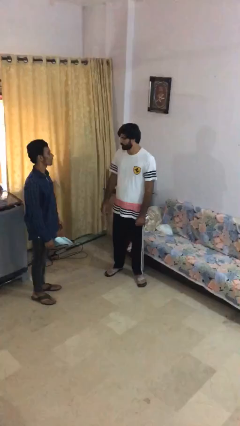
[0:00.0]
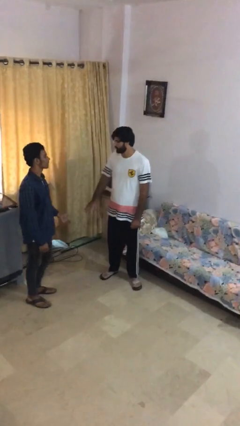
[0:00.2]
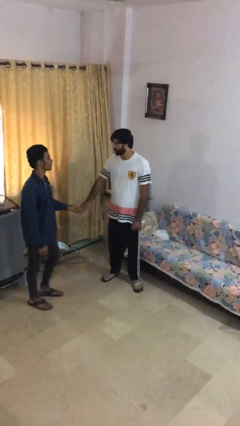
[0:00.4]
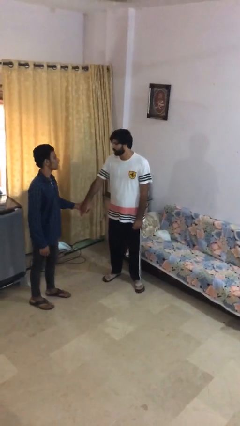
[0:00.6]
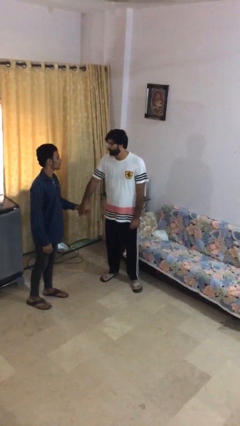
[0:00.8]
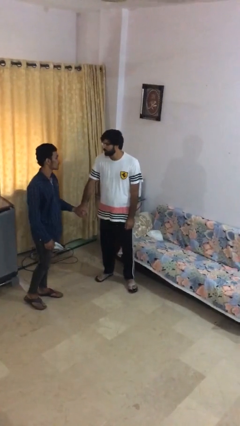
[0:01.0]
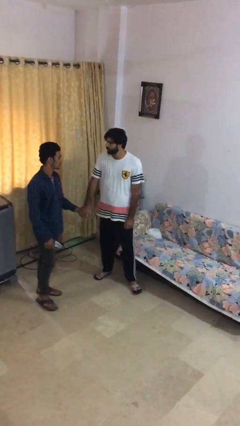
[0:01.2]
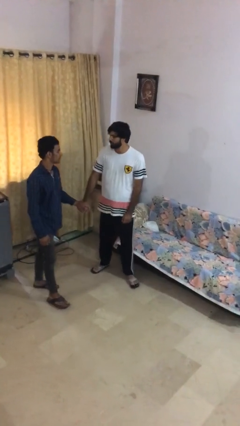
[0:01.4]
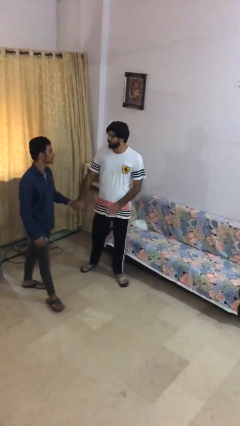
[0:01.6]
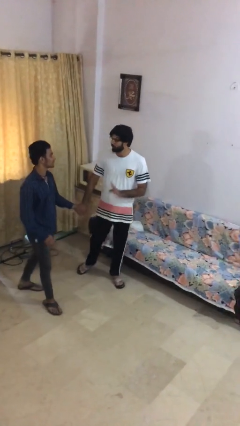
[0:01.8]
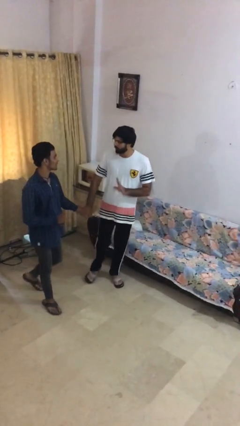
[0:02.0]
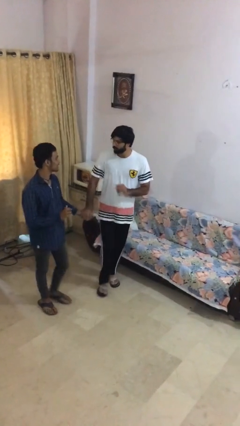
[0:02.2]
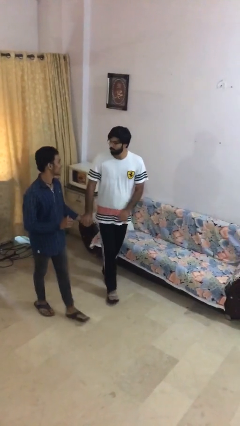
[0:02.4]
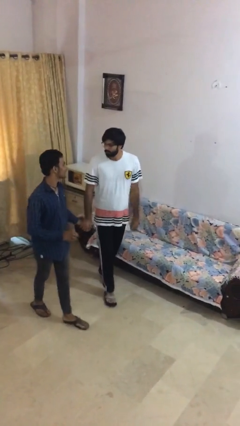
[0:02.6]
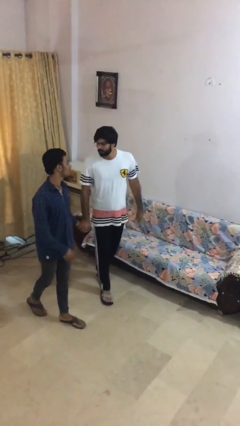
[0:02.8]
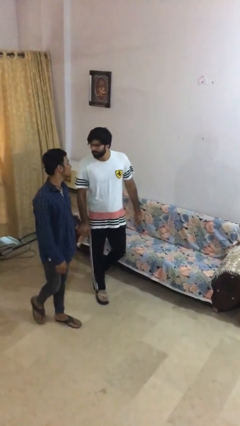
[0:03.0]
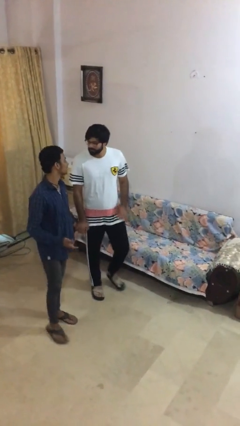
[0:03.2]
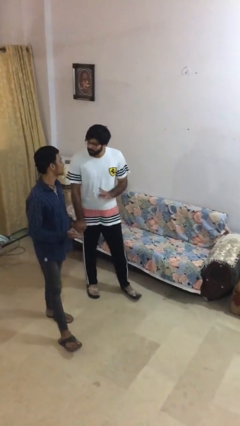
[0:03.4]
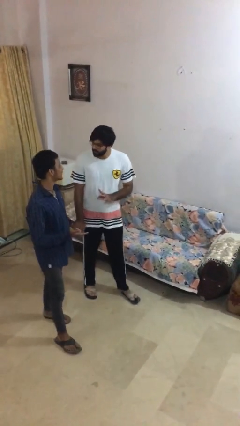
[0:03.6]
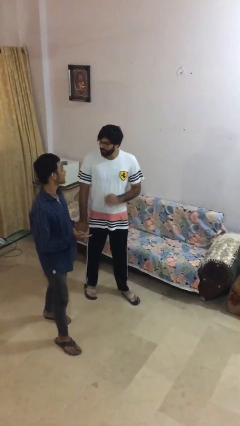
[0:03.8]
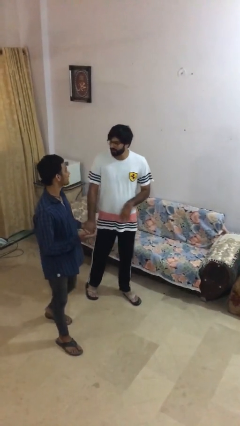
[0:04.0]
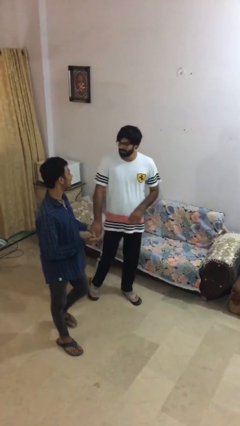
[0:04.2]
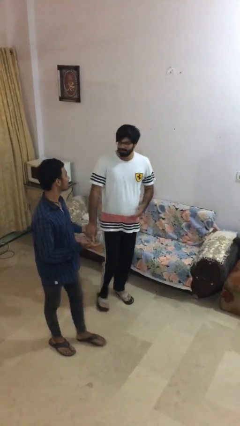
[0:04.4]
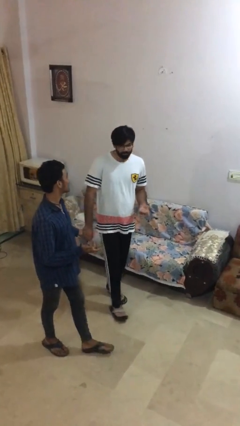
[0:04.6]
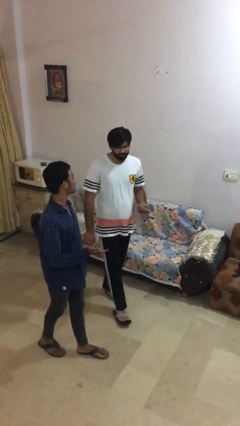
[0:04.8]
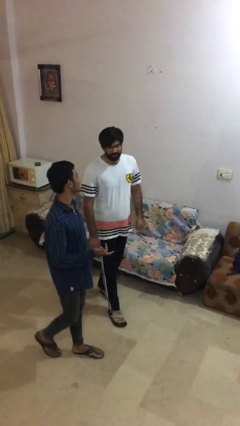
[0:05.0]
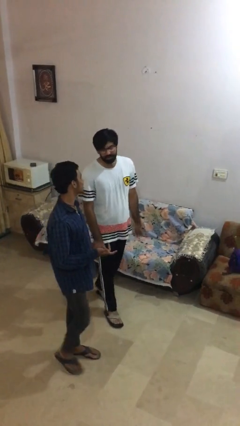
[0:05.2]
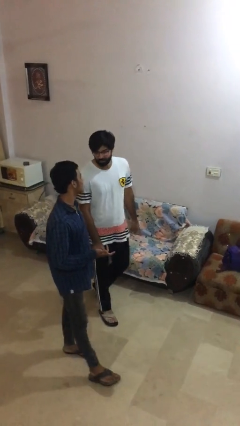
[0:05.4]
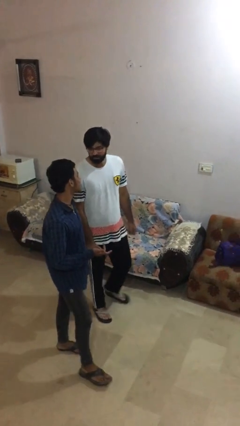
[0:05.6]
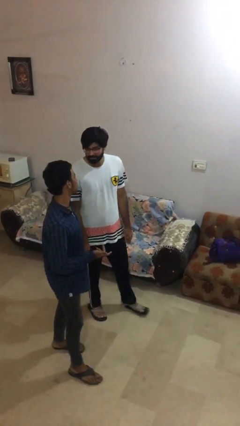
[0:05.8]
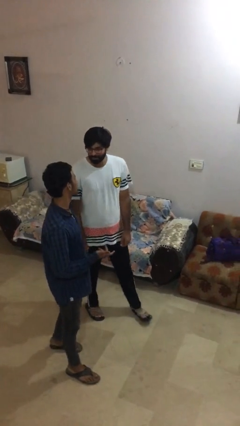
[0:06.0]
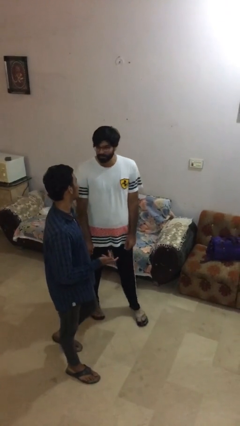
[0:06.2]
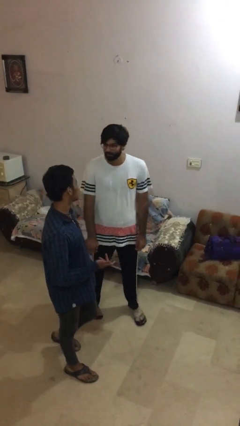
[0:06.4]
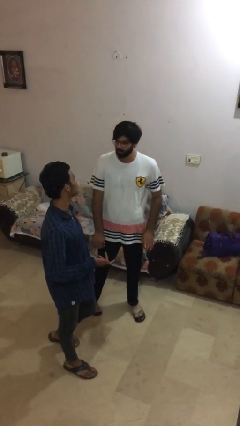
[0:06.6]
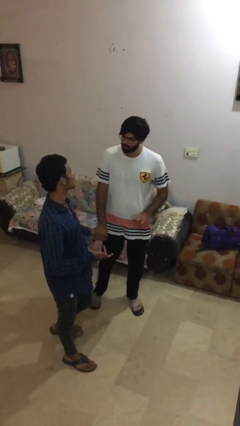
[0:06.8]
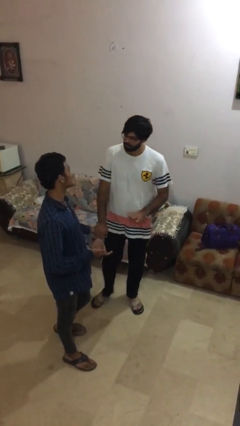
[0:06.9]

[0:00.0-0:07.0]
person holds hand

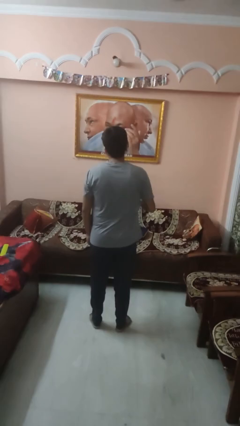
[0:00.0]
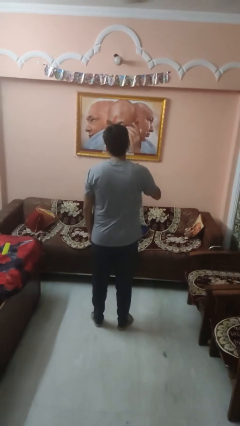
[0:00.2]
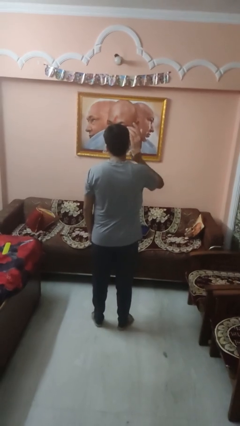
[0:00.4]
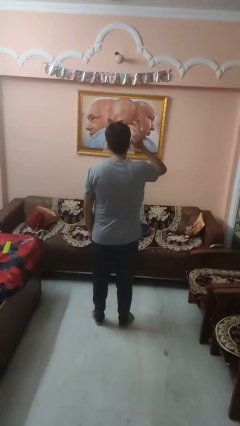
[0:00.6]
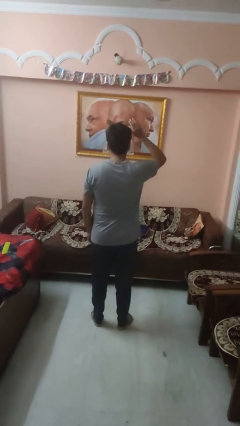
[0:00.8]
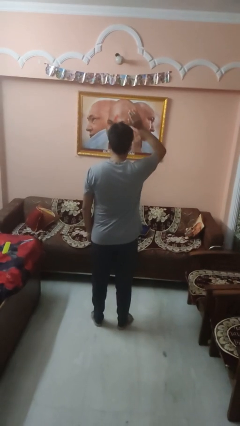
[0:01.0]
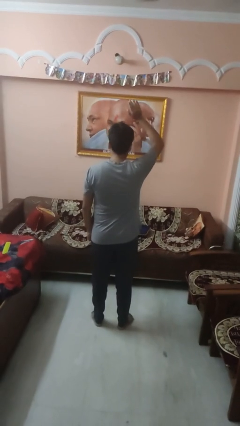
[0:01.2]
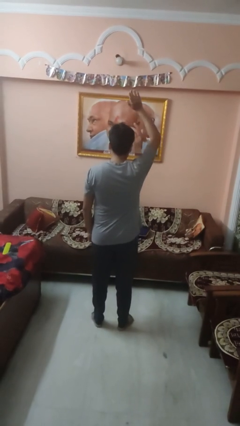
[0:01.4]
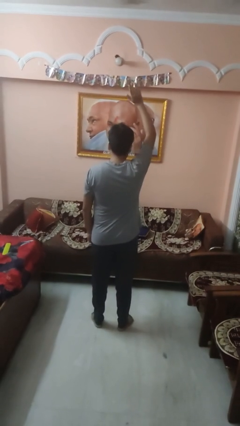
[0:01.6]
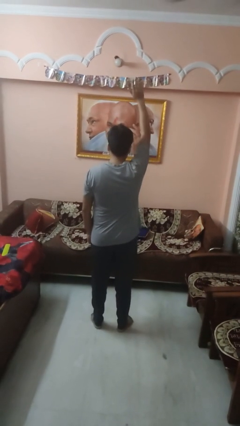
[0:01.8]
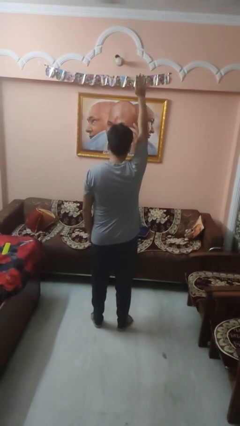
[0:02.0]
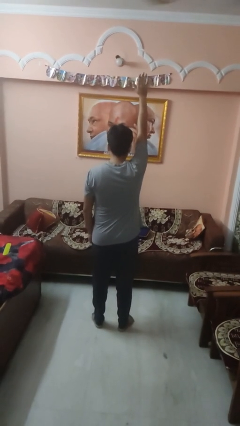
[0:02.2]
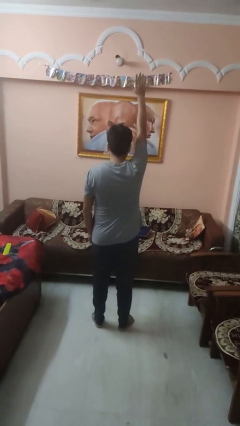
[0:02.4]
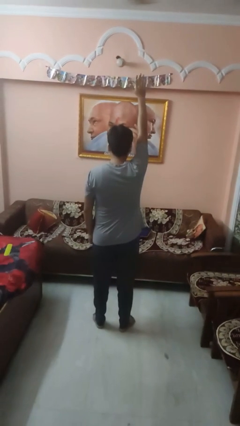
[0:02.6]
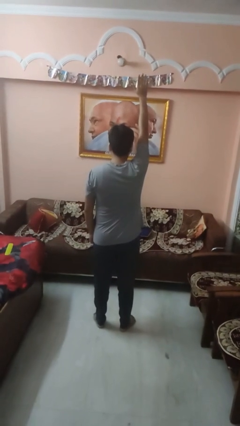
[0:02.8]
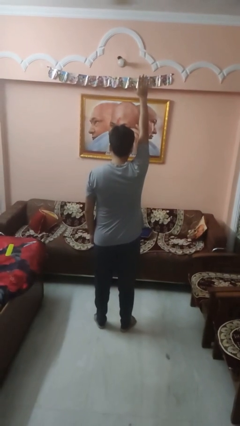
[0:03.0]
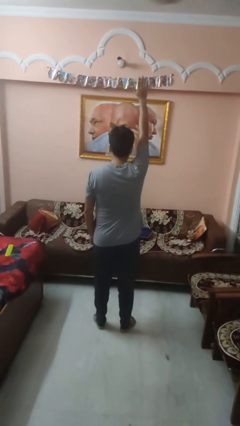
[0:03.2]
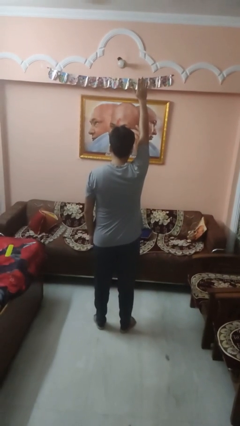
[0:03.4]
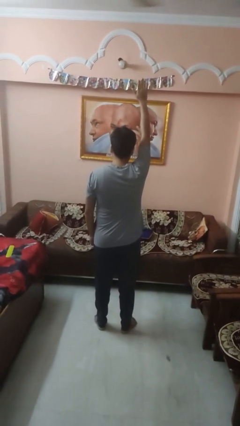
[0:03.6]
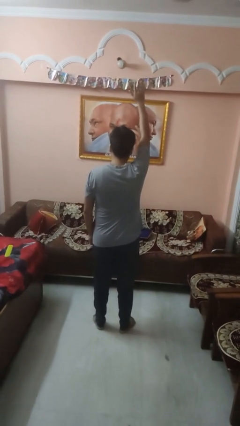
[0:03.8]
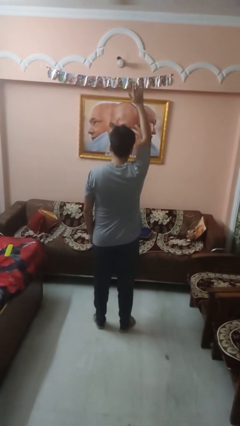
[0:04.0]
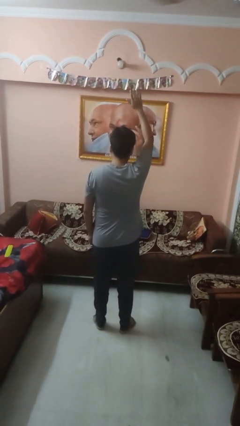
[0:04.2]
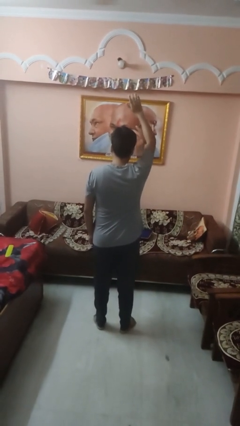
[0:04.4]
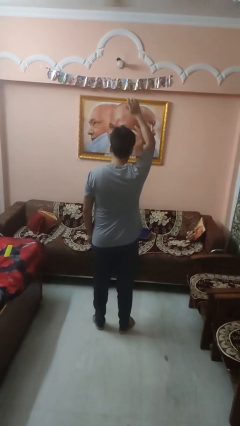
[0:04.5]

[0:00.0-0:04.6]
person gestures raise hand

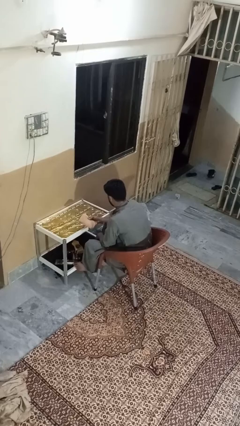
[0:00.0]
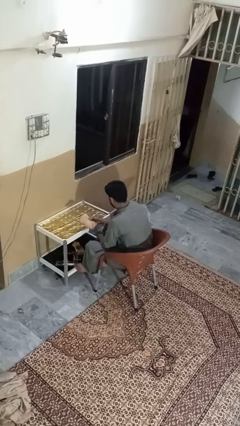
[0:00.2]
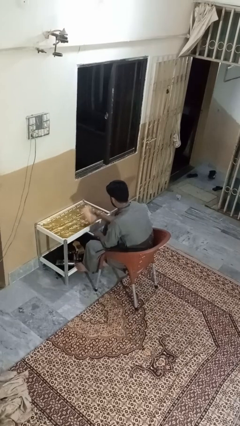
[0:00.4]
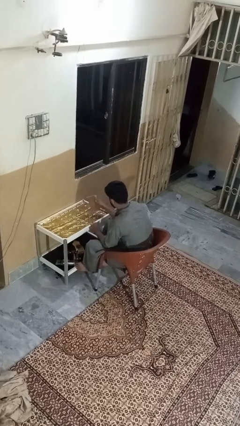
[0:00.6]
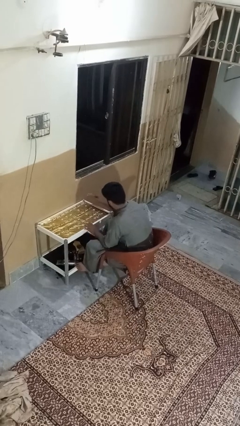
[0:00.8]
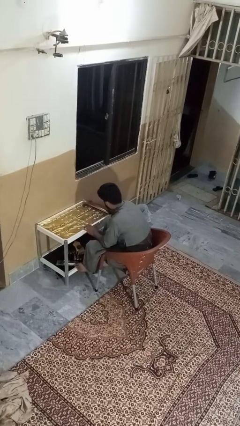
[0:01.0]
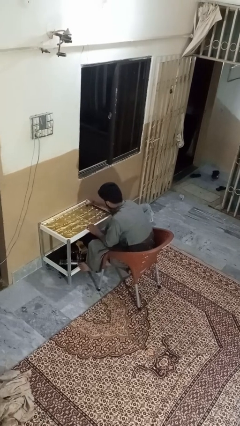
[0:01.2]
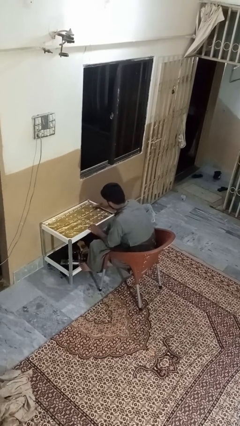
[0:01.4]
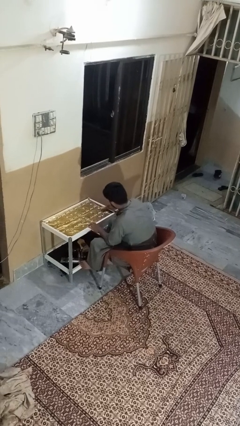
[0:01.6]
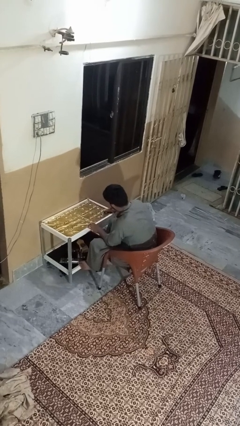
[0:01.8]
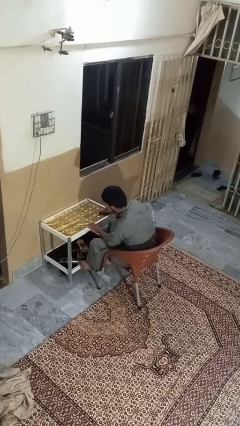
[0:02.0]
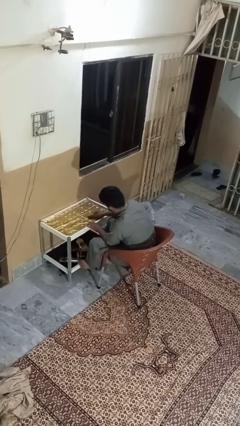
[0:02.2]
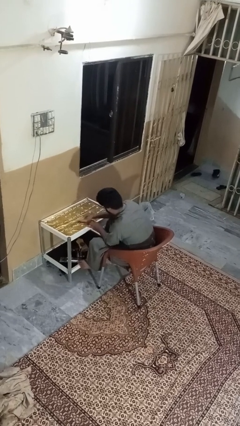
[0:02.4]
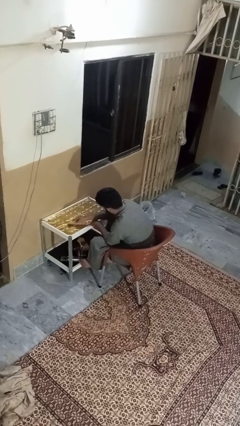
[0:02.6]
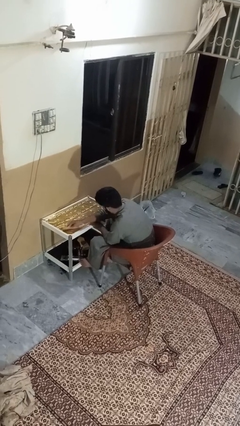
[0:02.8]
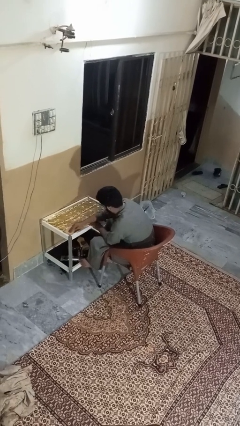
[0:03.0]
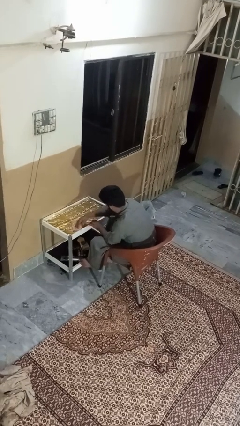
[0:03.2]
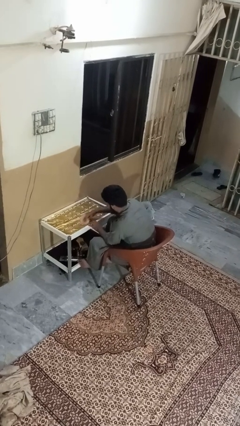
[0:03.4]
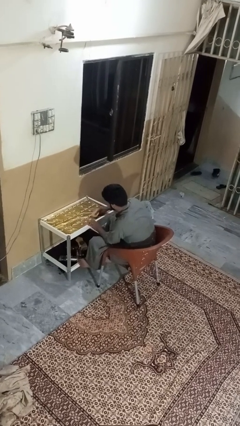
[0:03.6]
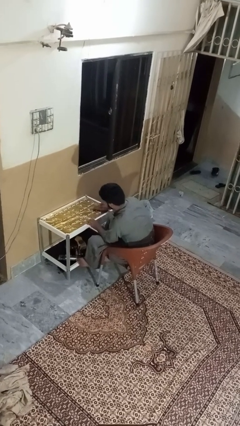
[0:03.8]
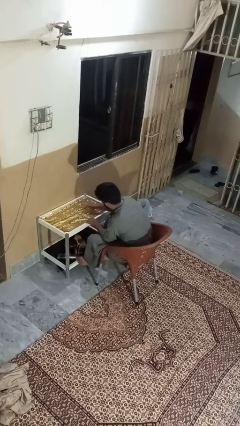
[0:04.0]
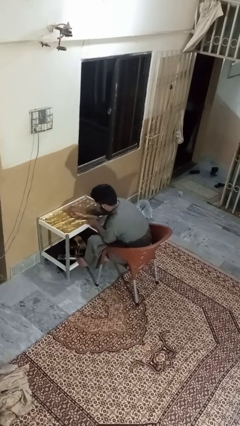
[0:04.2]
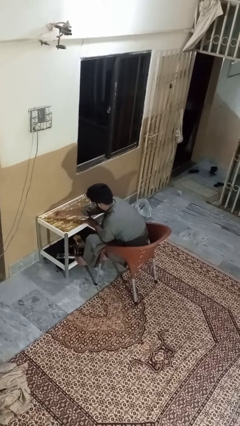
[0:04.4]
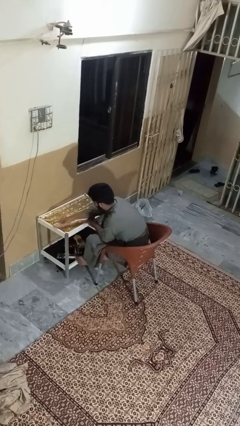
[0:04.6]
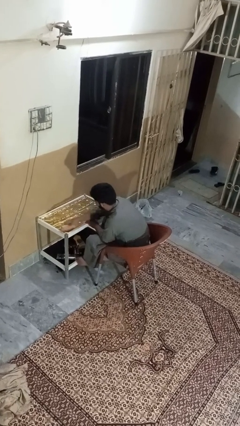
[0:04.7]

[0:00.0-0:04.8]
person cleans table with rag

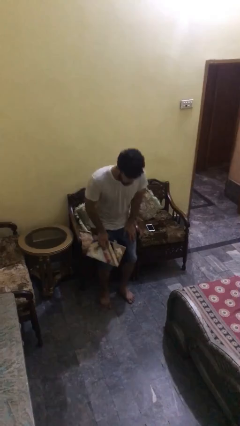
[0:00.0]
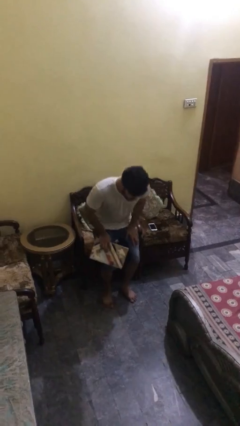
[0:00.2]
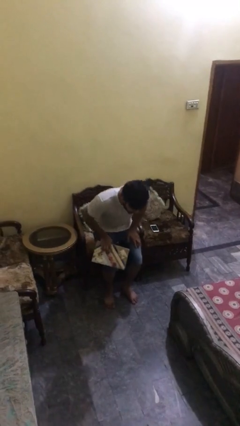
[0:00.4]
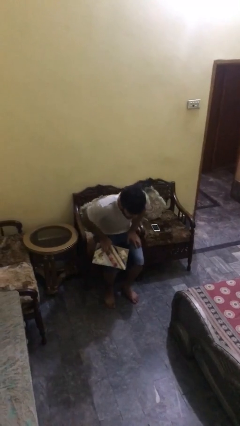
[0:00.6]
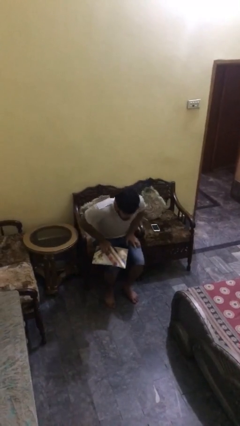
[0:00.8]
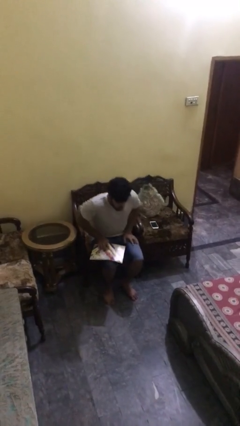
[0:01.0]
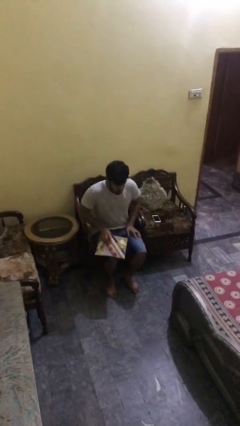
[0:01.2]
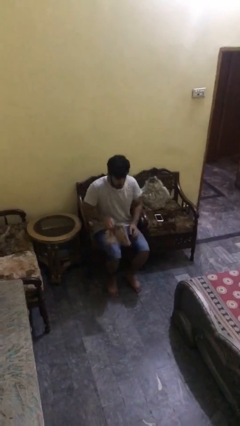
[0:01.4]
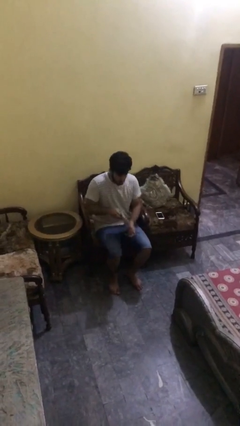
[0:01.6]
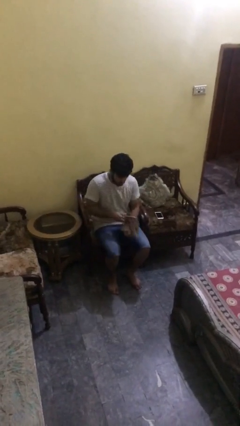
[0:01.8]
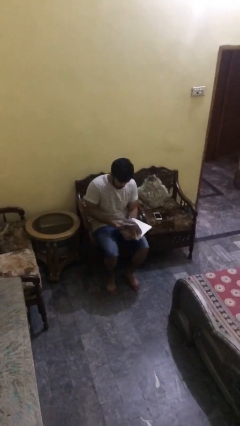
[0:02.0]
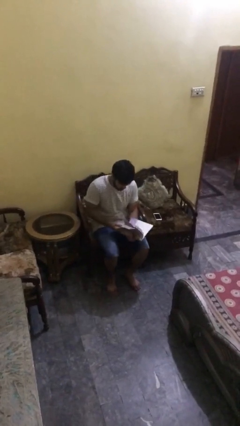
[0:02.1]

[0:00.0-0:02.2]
person sits down
